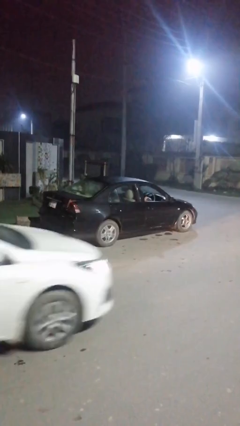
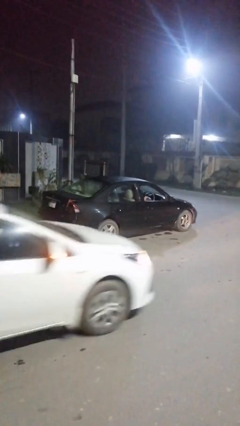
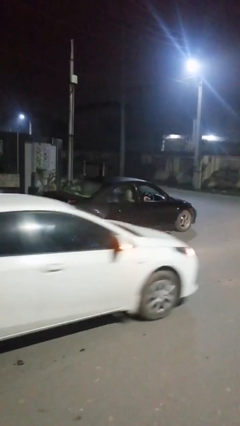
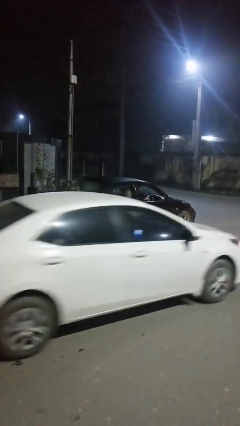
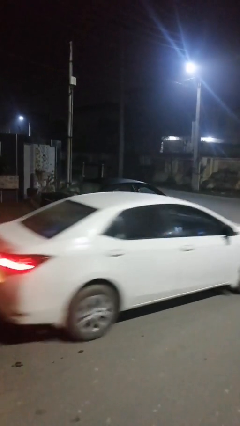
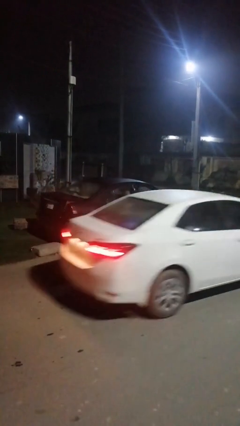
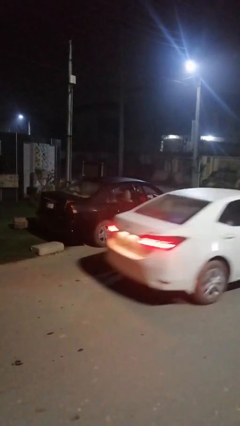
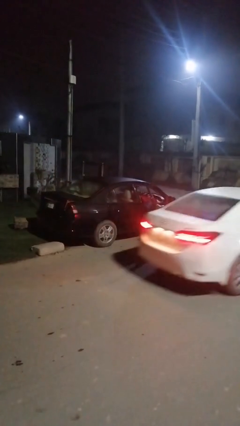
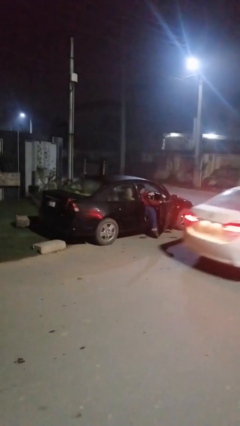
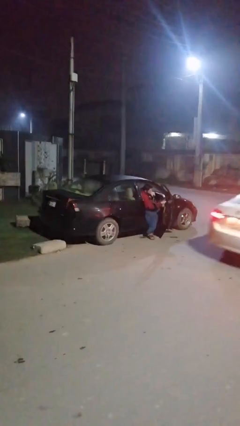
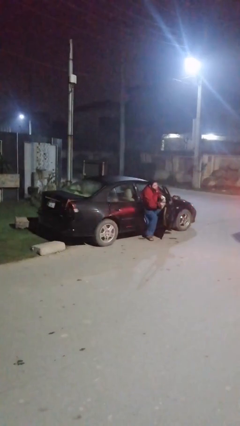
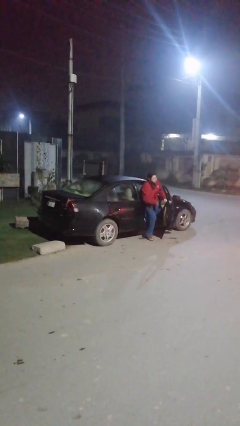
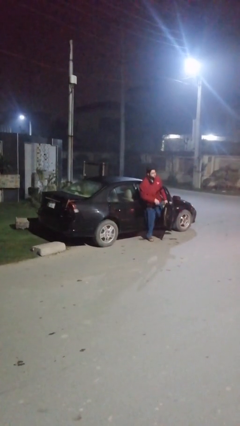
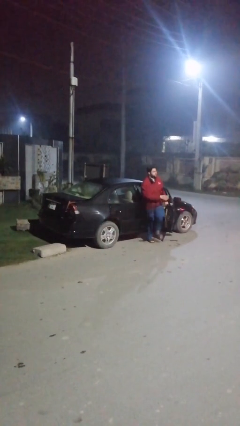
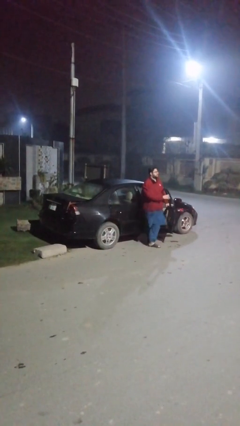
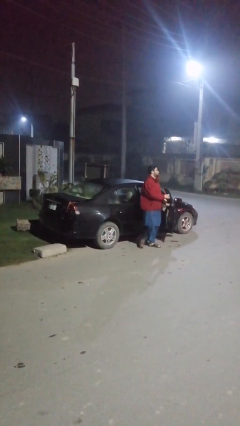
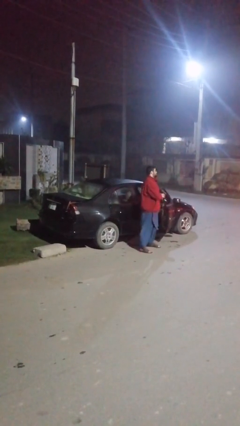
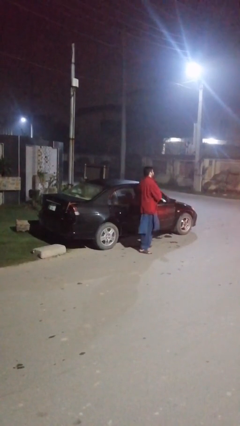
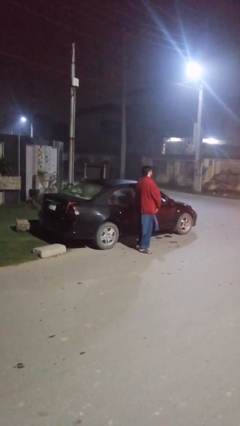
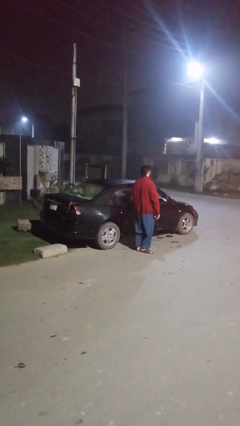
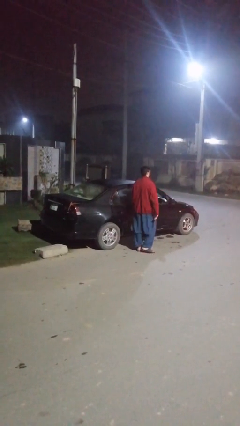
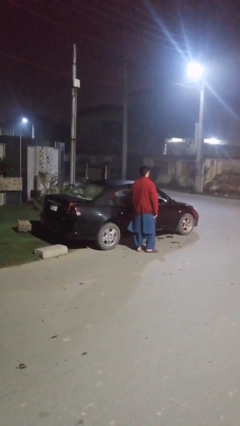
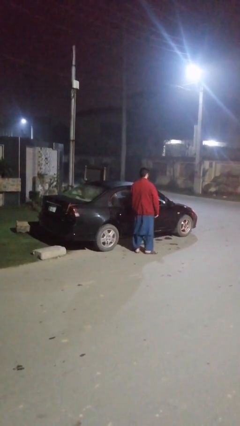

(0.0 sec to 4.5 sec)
car drops off person

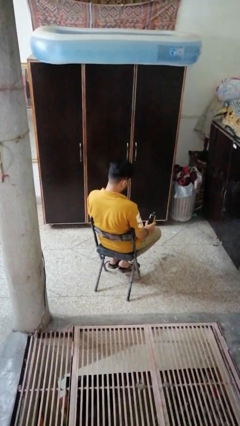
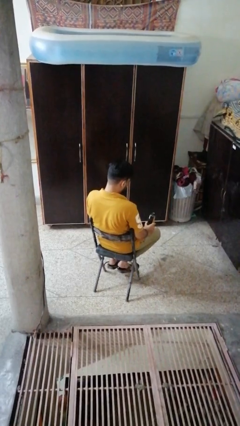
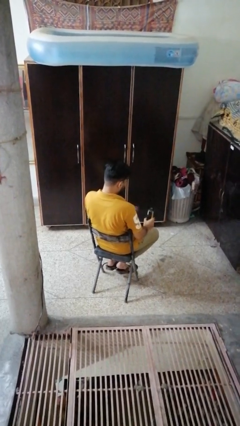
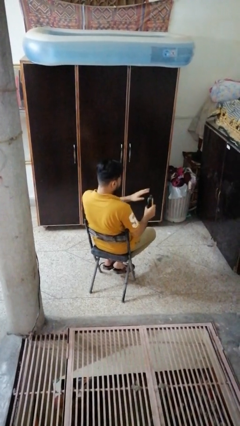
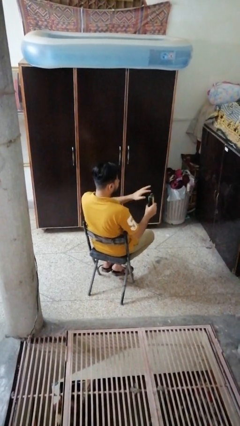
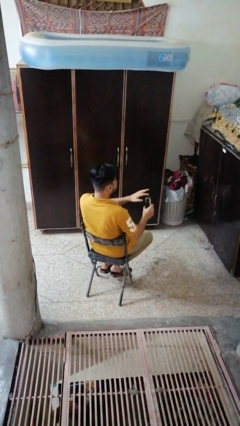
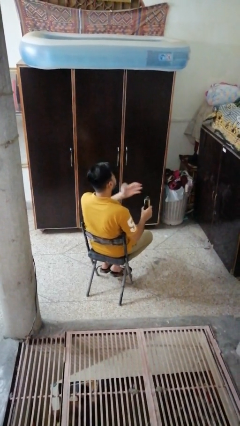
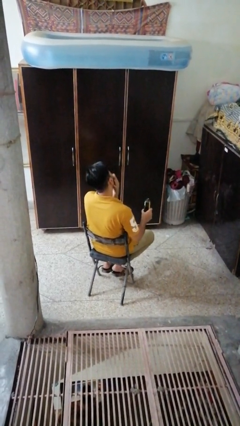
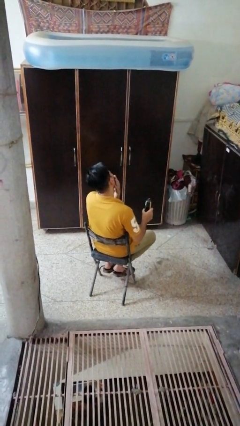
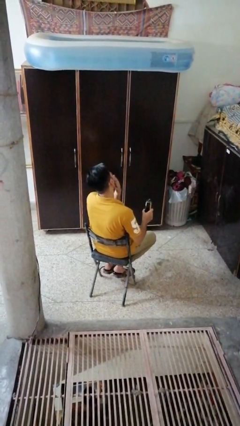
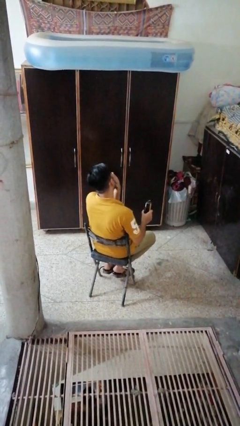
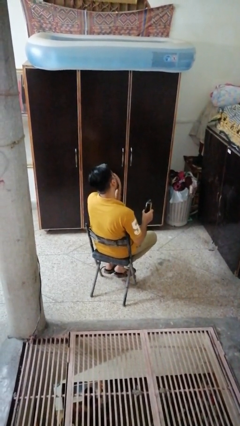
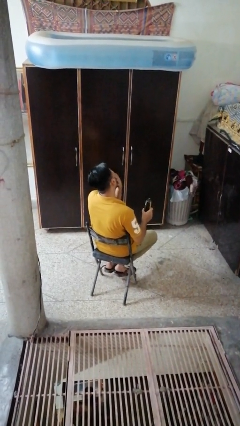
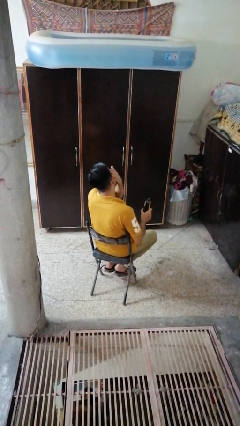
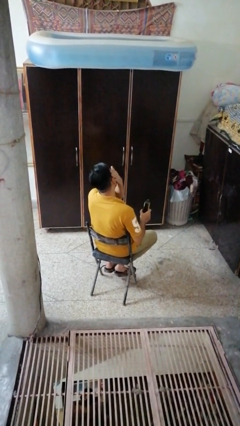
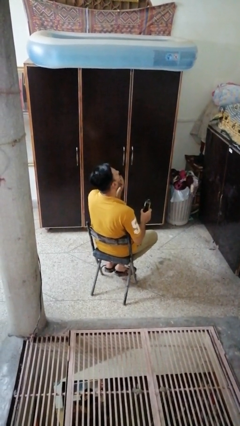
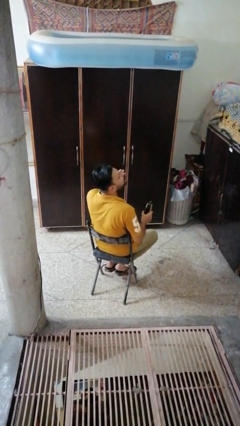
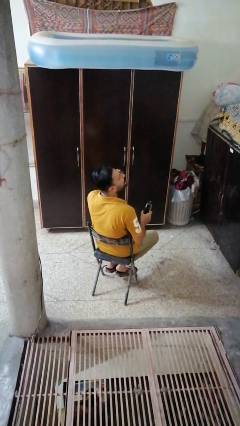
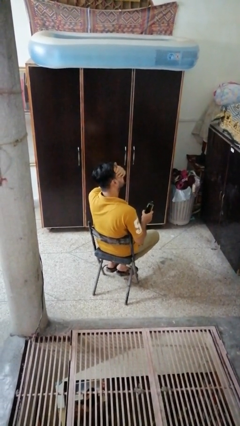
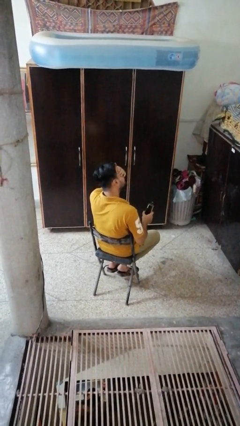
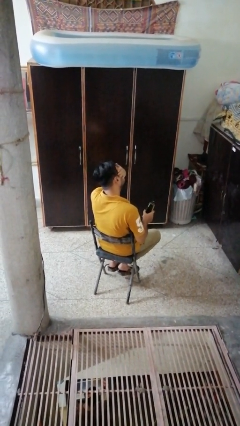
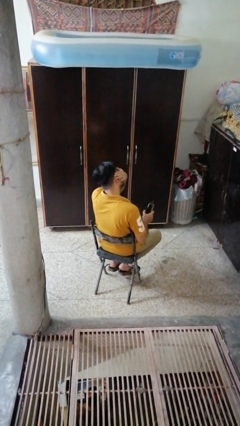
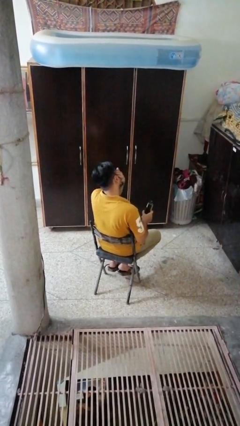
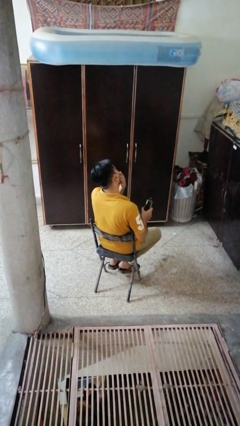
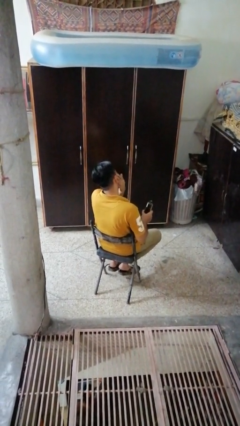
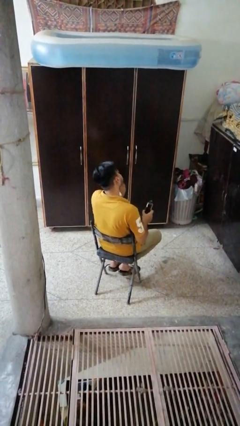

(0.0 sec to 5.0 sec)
person applies sunscreen

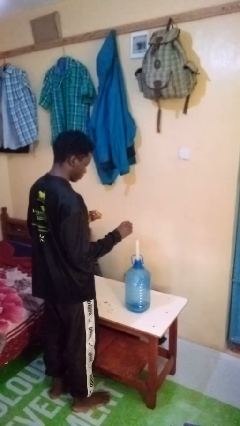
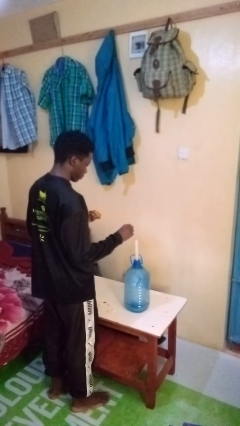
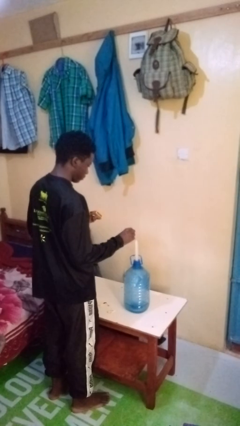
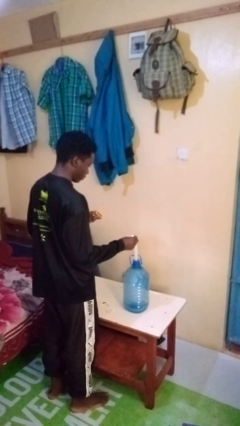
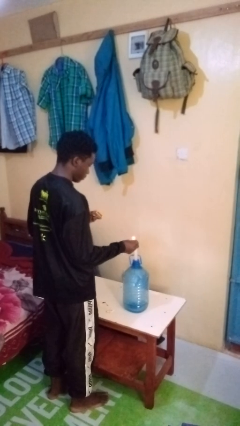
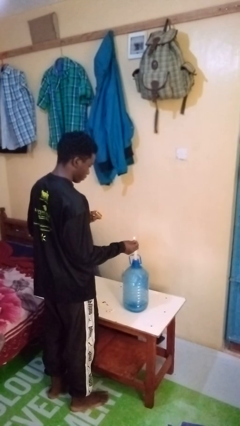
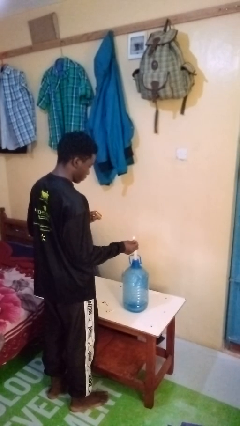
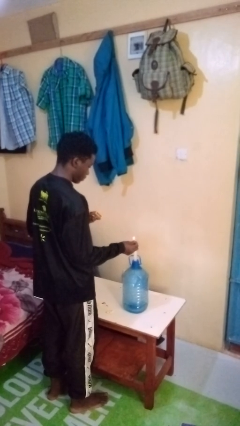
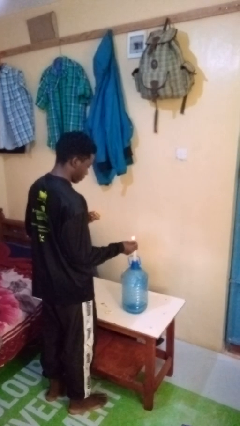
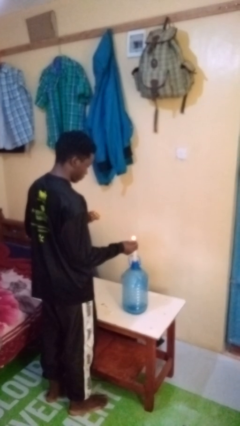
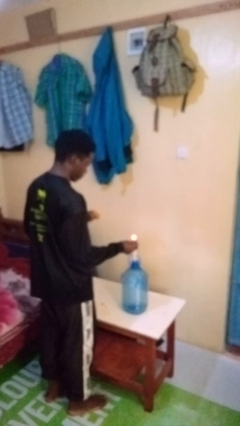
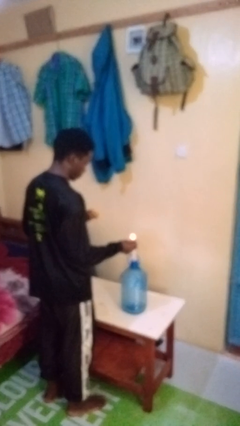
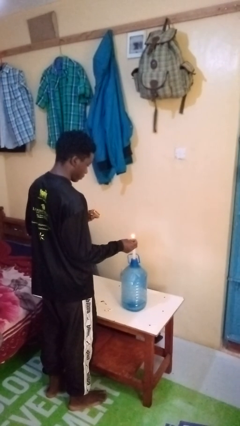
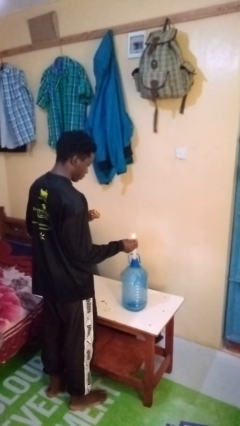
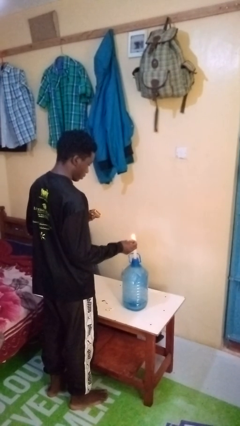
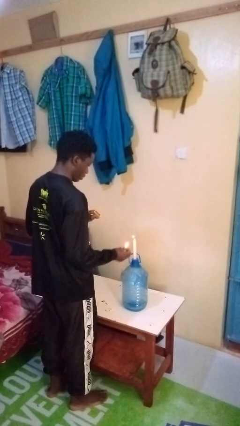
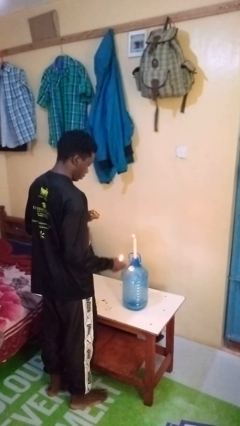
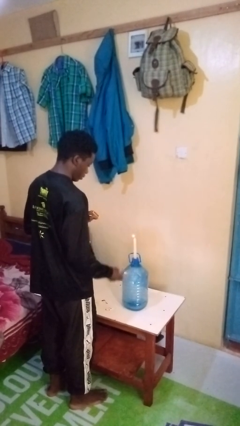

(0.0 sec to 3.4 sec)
person lights candle

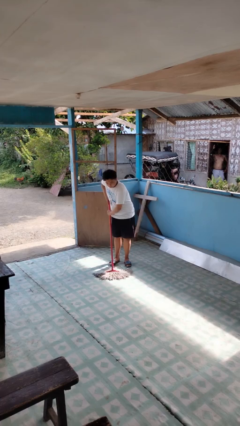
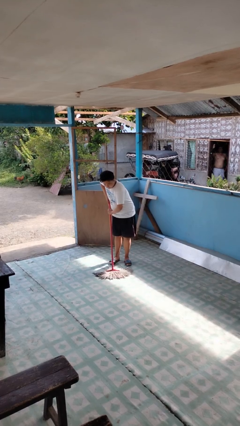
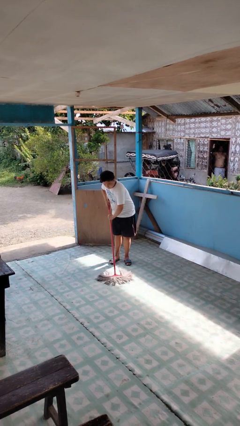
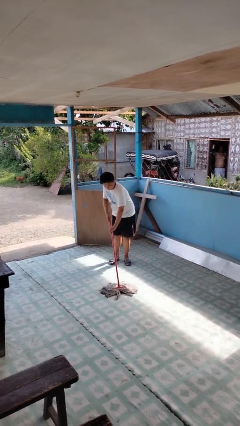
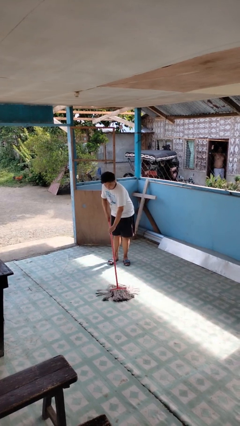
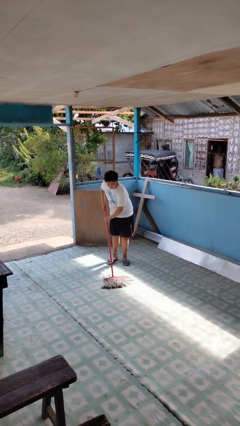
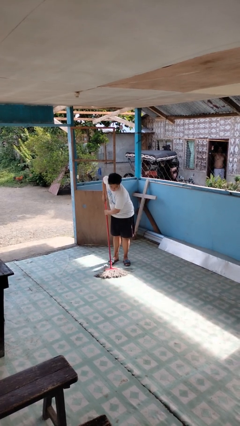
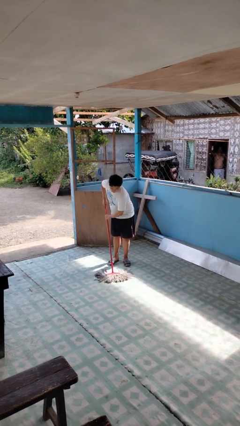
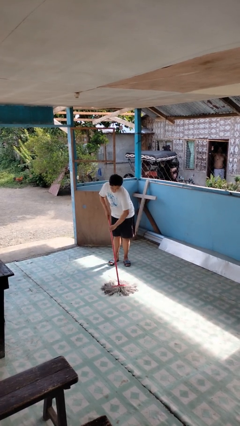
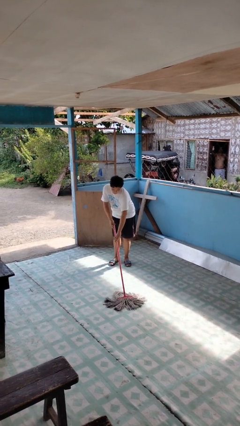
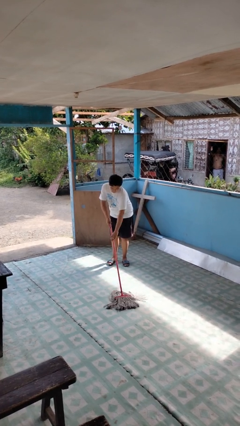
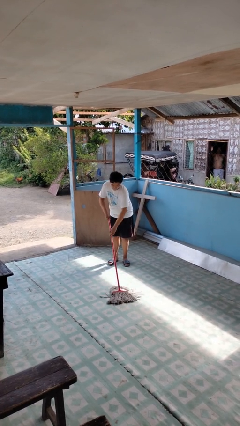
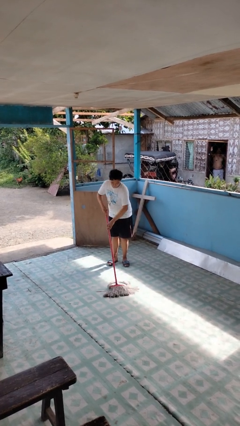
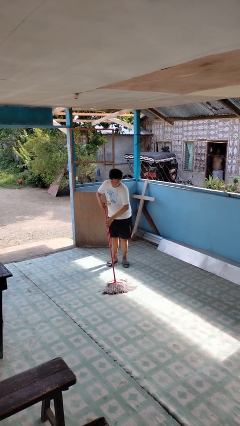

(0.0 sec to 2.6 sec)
person mops

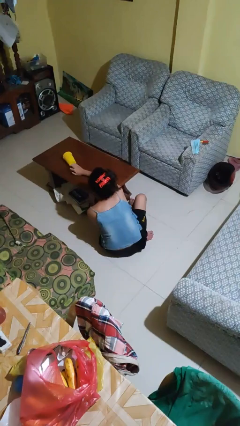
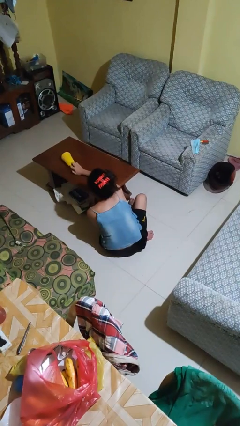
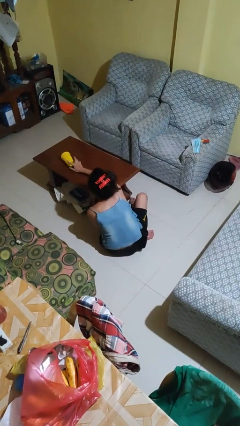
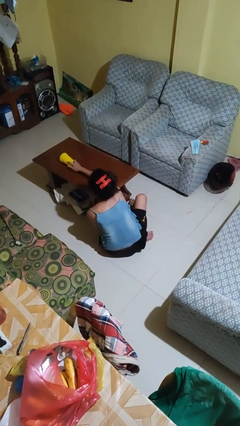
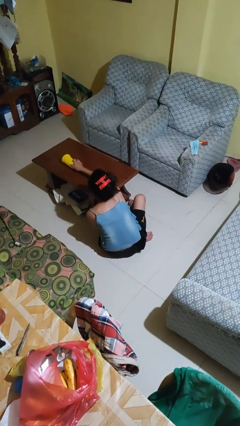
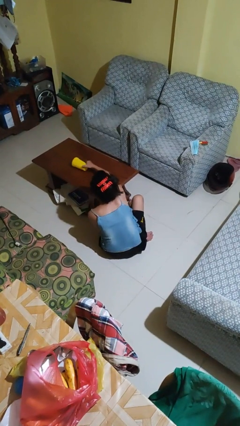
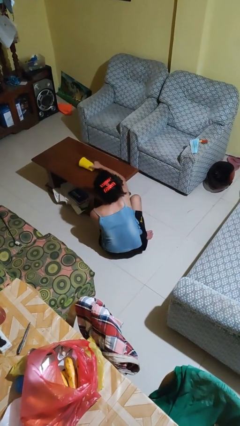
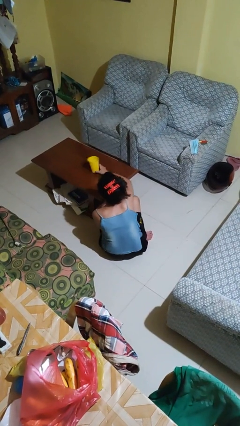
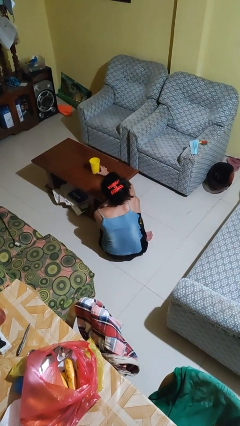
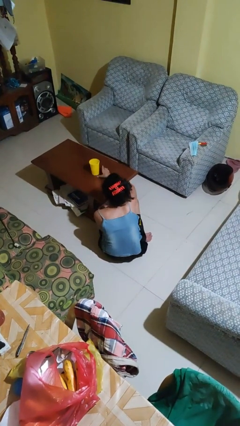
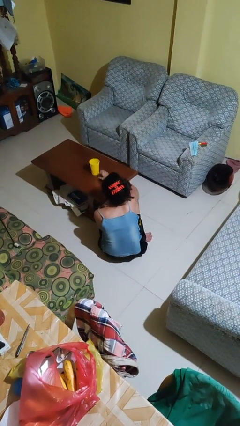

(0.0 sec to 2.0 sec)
person sets upright glass

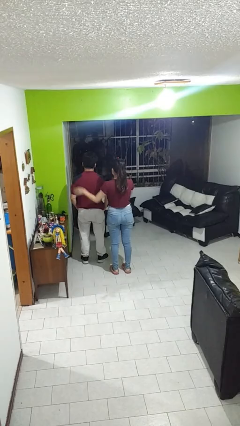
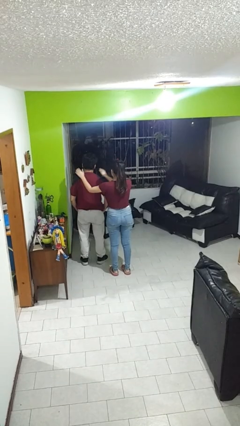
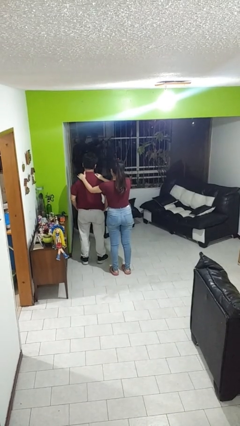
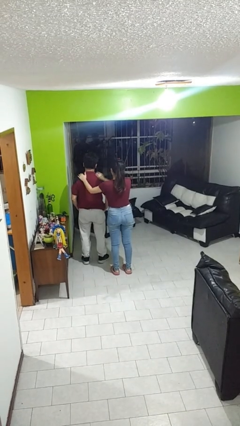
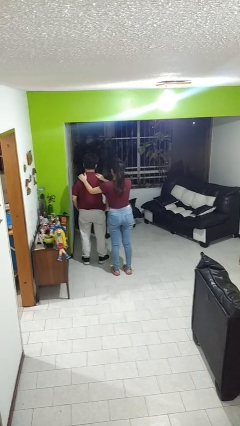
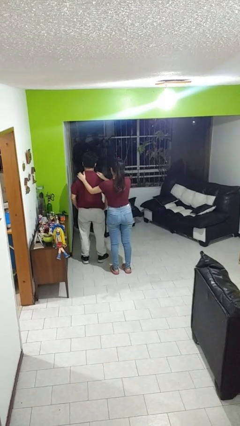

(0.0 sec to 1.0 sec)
person pounds shoulders of person
